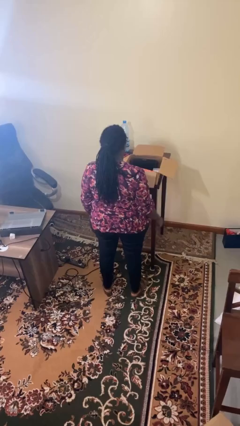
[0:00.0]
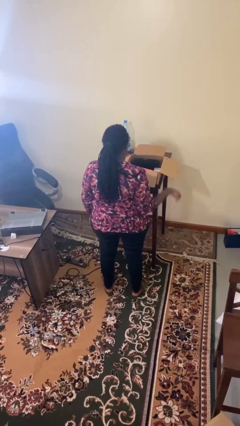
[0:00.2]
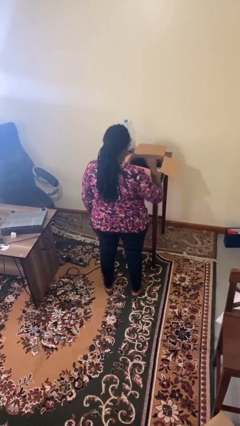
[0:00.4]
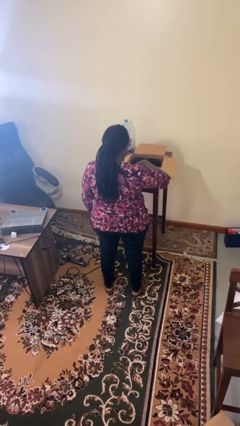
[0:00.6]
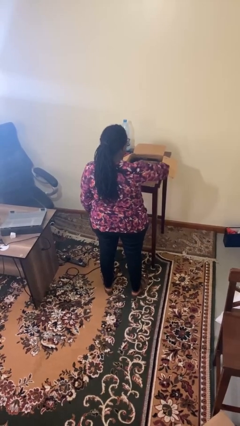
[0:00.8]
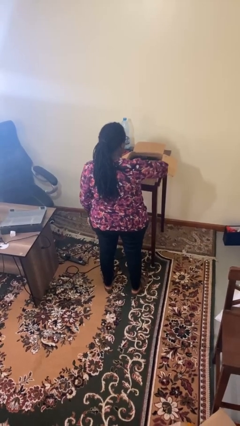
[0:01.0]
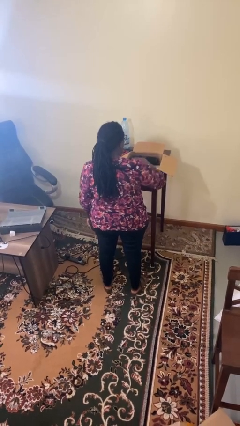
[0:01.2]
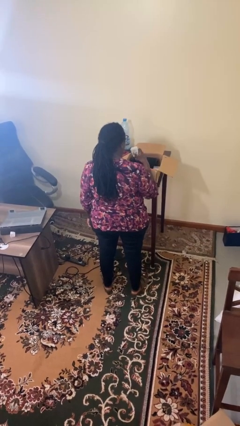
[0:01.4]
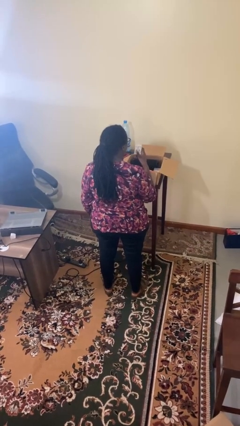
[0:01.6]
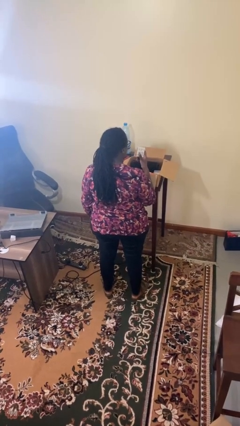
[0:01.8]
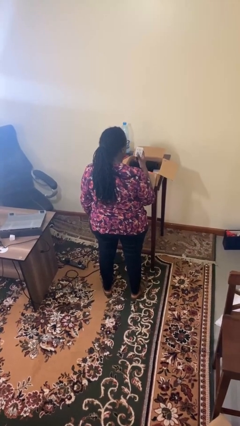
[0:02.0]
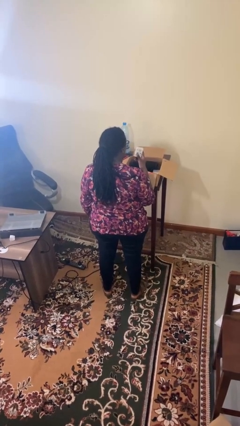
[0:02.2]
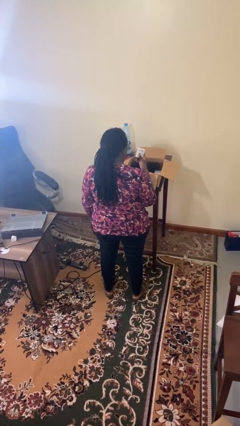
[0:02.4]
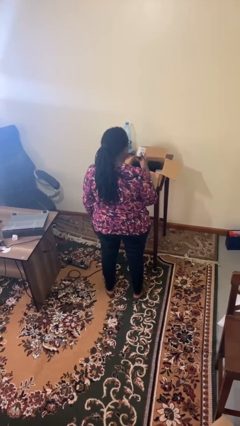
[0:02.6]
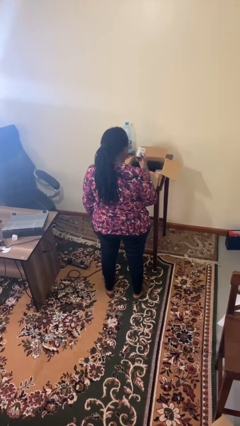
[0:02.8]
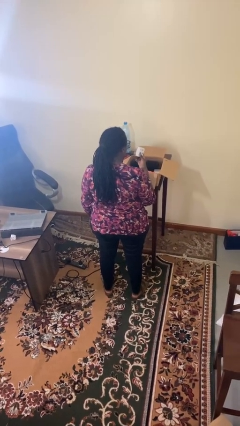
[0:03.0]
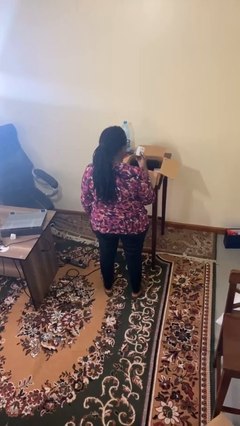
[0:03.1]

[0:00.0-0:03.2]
person takes object from box

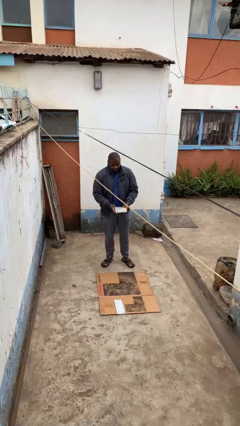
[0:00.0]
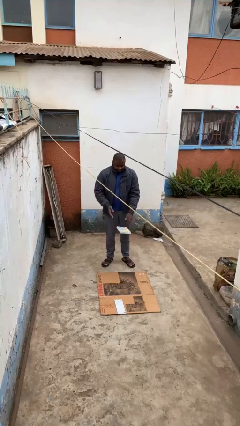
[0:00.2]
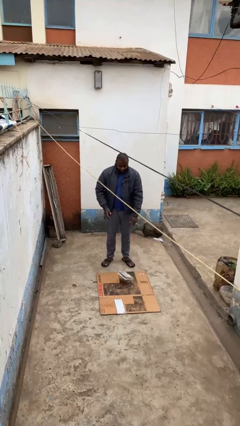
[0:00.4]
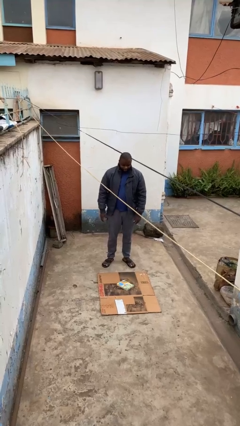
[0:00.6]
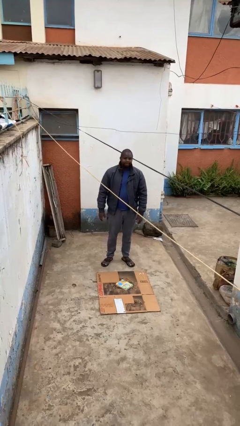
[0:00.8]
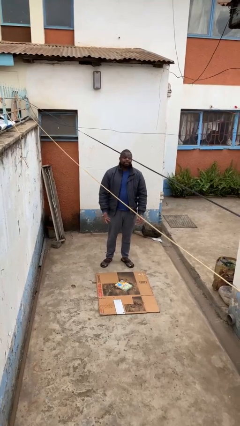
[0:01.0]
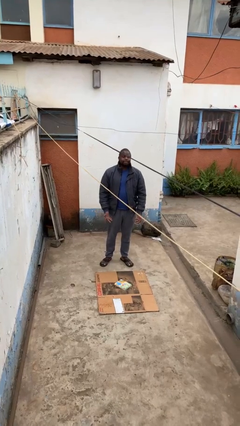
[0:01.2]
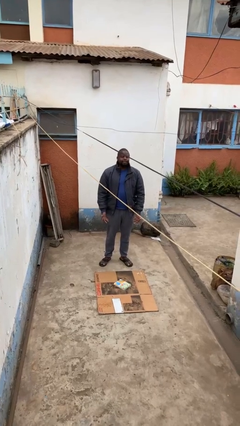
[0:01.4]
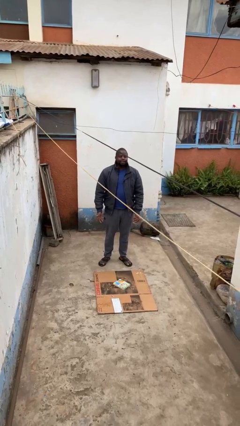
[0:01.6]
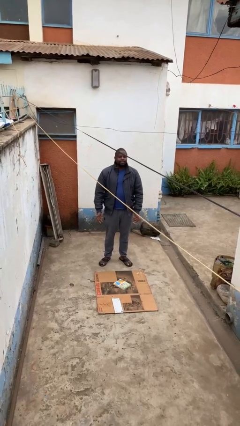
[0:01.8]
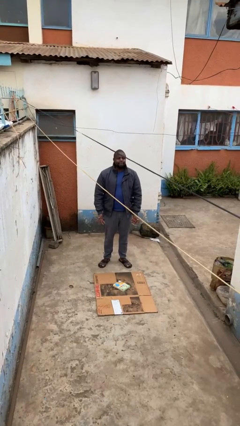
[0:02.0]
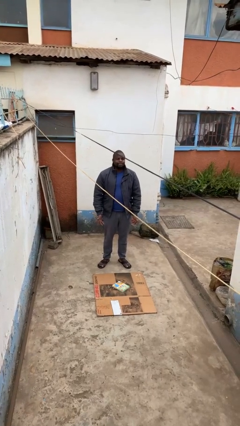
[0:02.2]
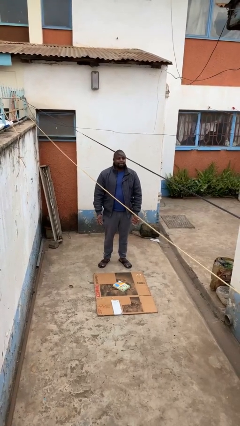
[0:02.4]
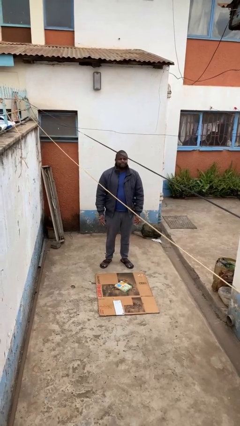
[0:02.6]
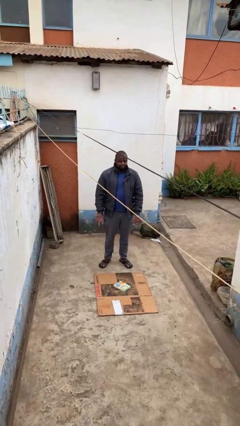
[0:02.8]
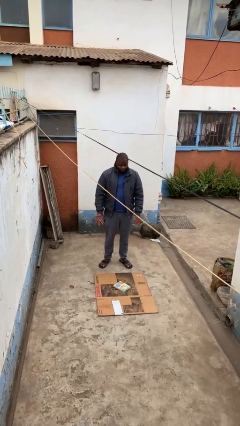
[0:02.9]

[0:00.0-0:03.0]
person drops object

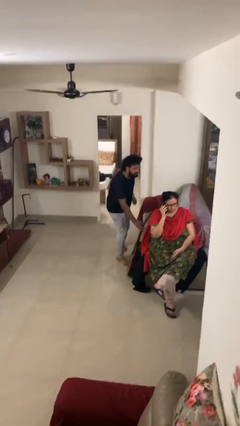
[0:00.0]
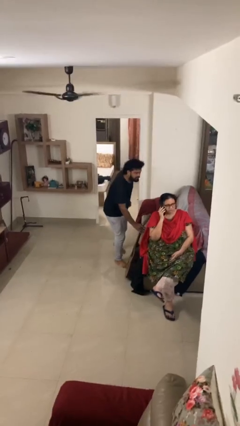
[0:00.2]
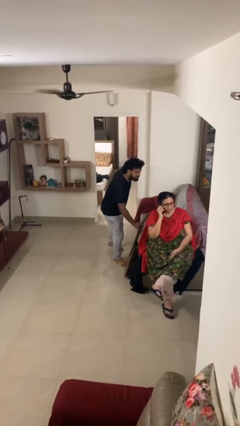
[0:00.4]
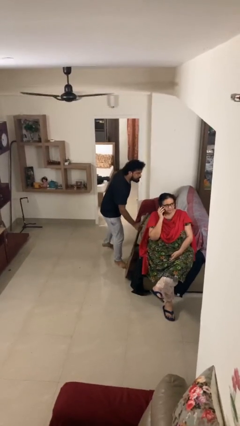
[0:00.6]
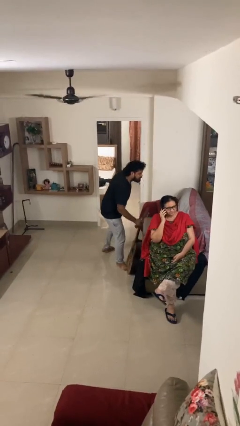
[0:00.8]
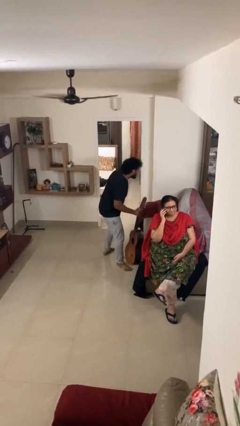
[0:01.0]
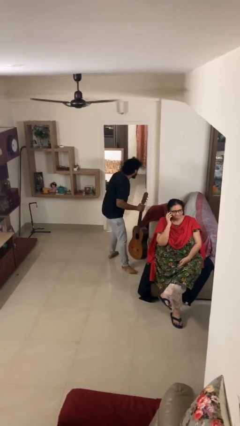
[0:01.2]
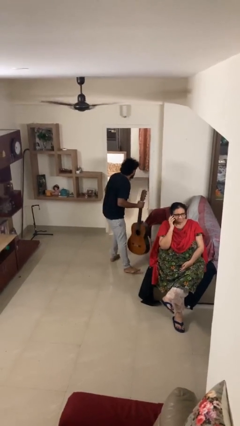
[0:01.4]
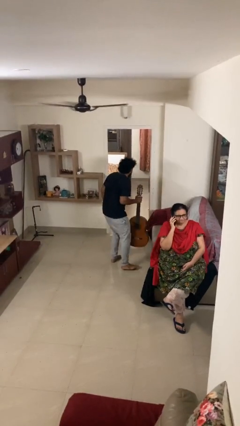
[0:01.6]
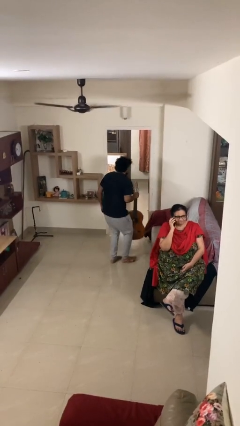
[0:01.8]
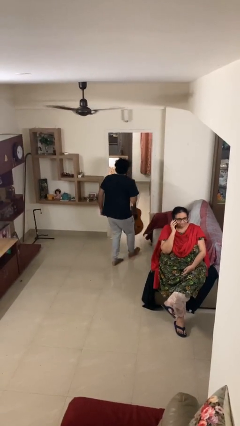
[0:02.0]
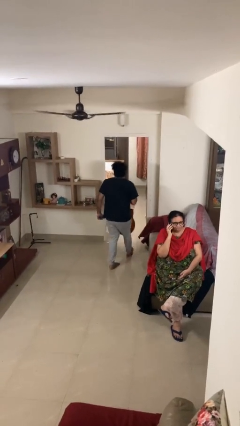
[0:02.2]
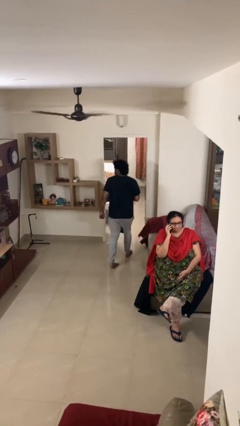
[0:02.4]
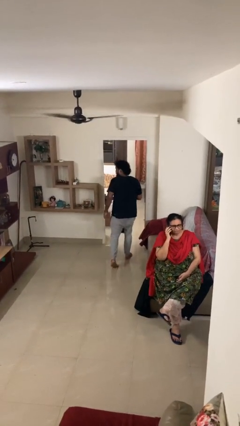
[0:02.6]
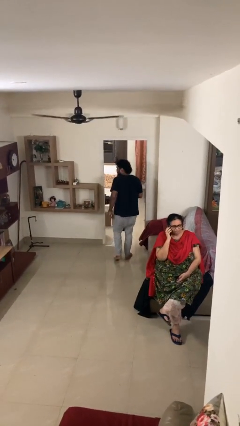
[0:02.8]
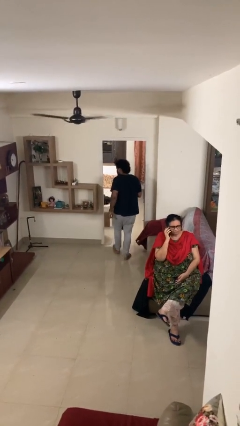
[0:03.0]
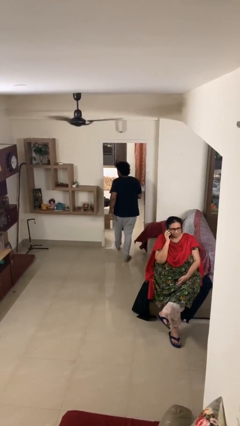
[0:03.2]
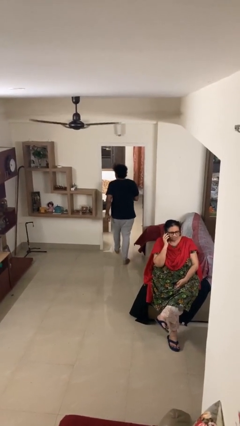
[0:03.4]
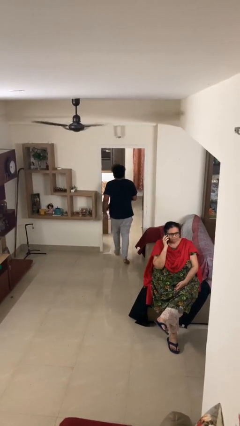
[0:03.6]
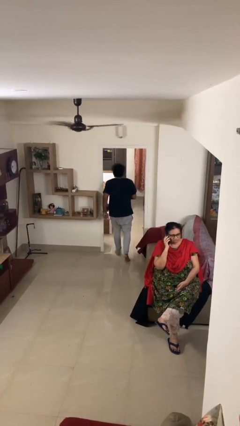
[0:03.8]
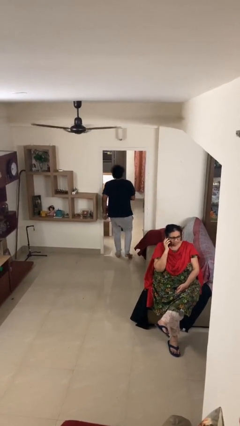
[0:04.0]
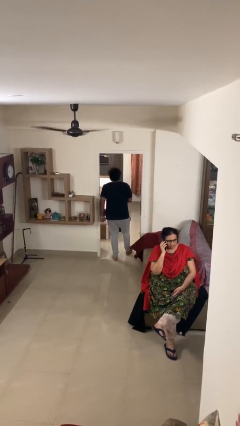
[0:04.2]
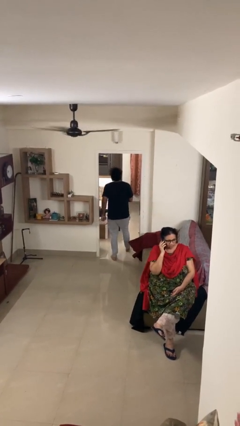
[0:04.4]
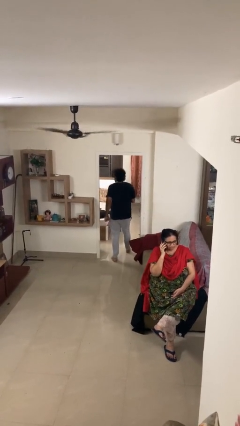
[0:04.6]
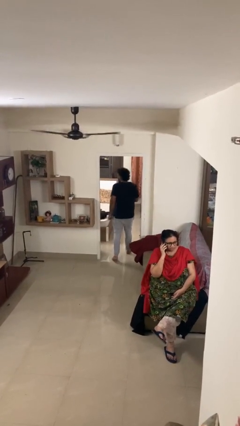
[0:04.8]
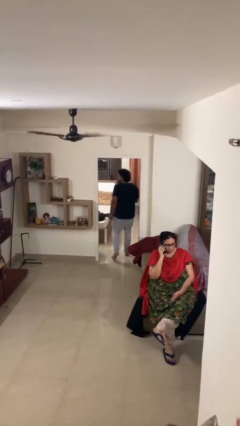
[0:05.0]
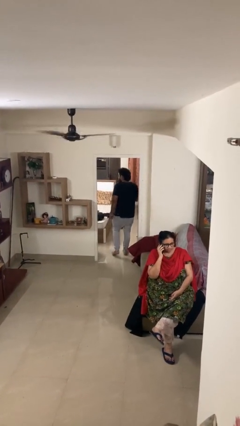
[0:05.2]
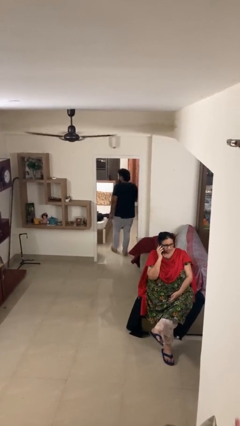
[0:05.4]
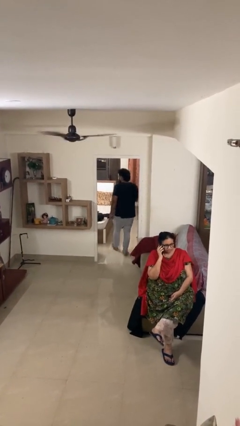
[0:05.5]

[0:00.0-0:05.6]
person steals object from person

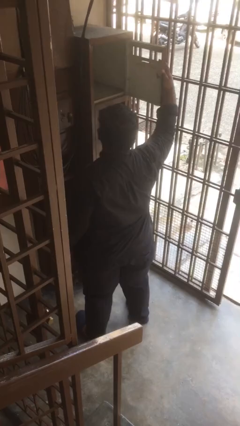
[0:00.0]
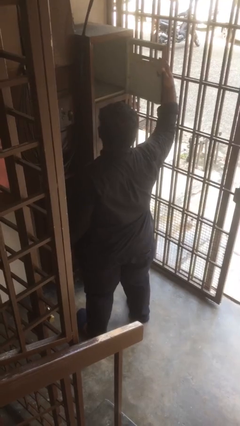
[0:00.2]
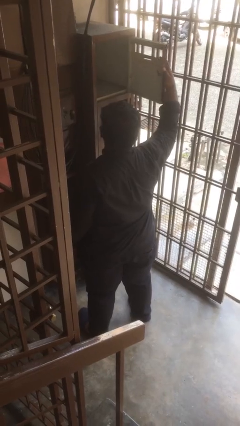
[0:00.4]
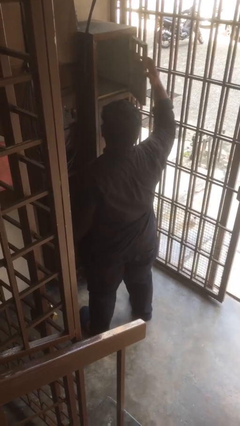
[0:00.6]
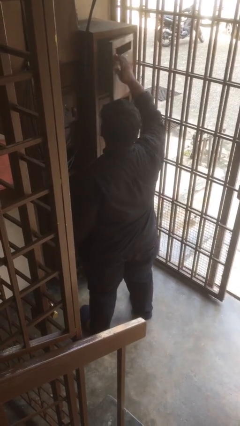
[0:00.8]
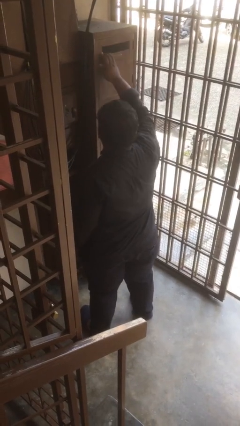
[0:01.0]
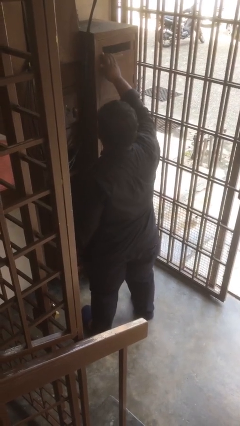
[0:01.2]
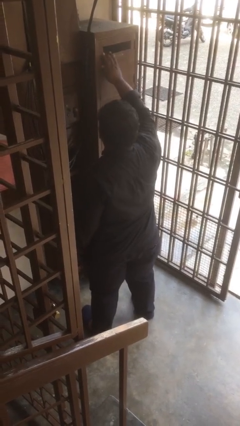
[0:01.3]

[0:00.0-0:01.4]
person closes mailbox

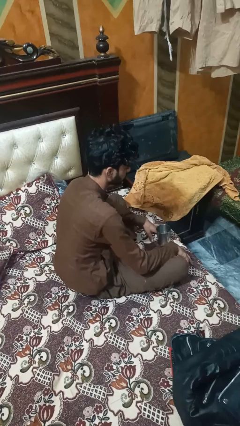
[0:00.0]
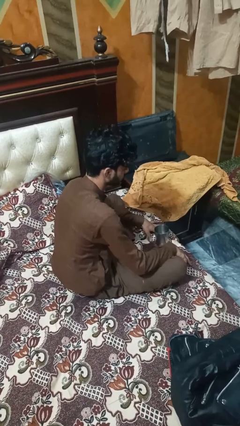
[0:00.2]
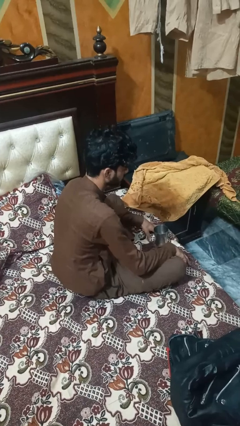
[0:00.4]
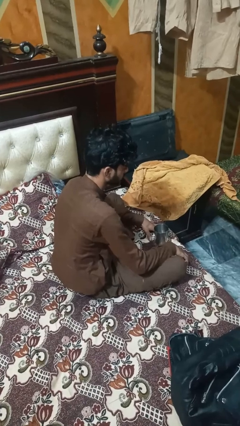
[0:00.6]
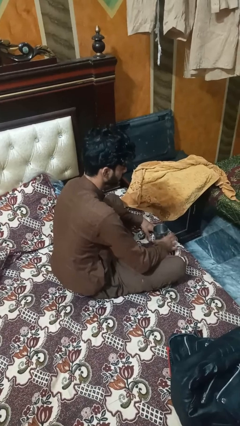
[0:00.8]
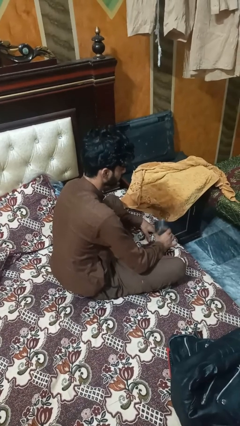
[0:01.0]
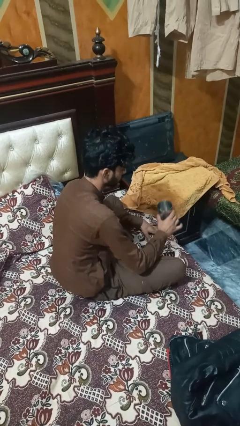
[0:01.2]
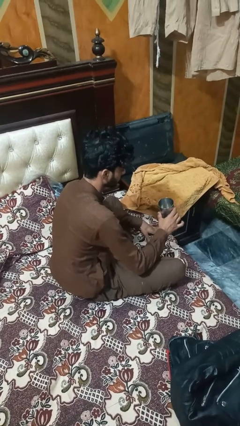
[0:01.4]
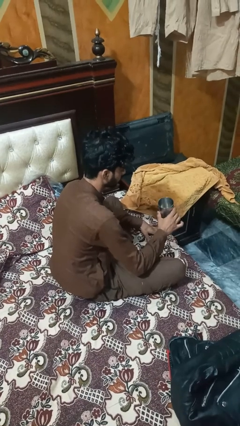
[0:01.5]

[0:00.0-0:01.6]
person picks up object from table

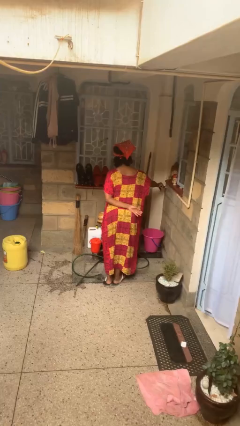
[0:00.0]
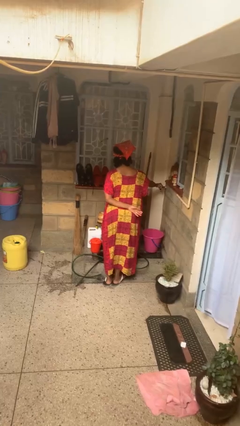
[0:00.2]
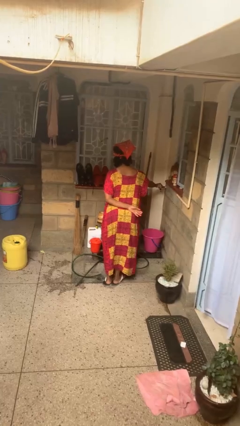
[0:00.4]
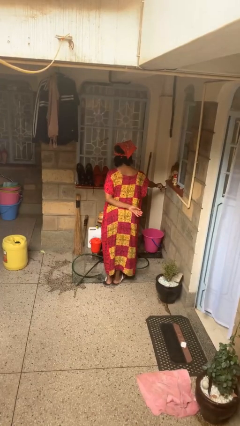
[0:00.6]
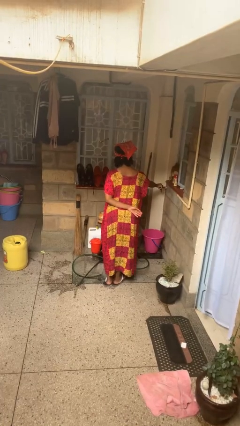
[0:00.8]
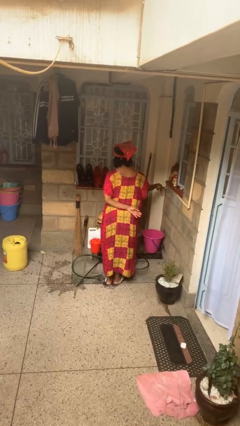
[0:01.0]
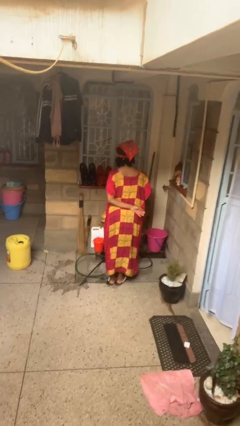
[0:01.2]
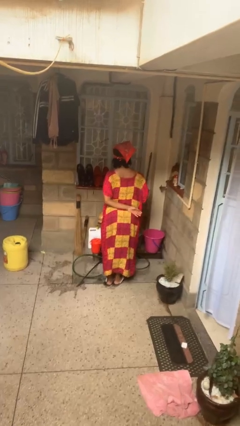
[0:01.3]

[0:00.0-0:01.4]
person turns off faucet

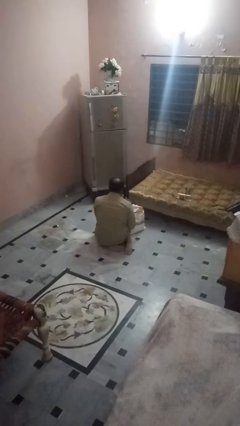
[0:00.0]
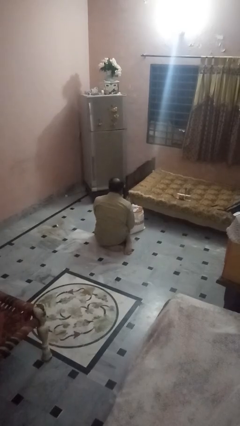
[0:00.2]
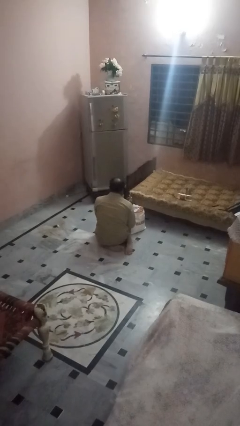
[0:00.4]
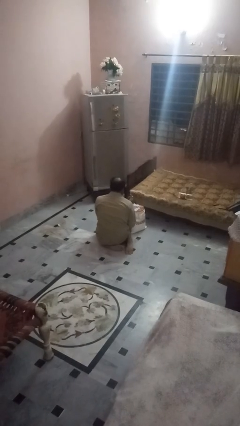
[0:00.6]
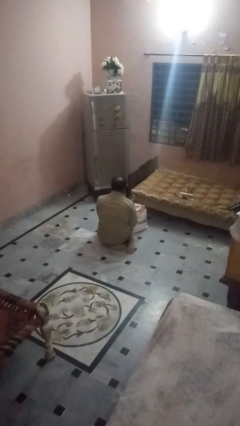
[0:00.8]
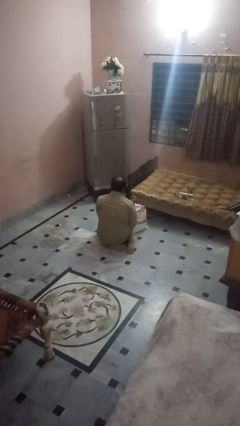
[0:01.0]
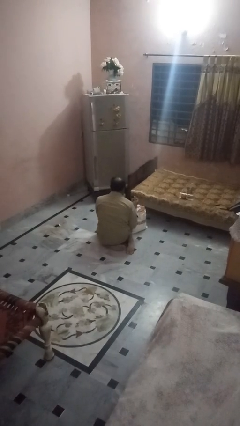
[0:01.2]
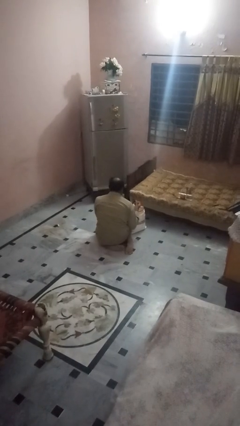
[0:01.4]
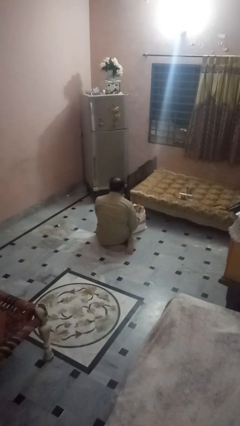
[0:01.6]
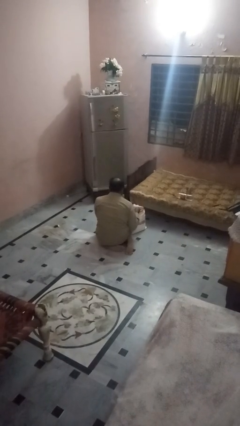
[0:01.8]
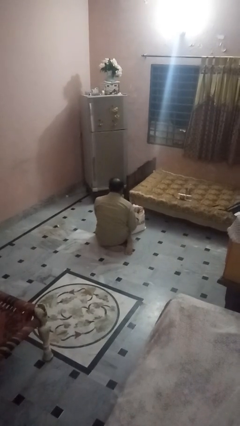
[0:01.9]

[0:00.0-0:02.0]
person puts object into bag
